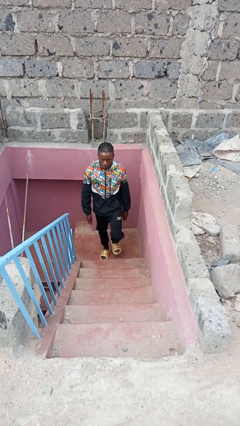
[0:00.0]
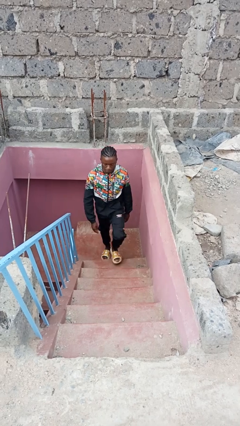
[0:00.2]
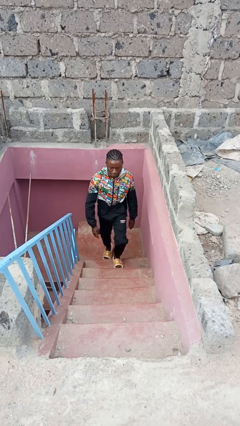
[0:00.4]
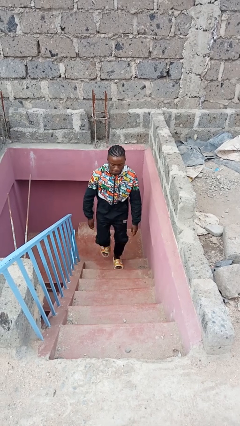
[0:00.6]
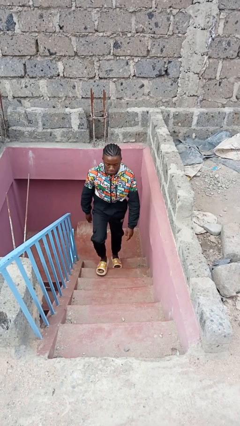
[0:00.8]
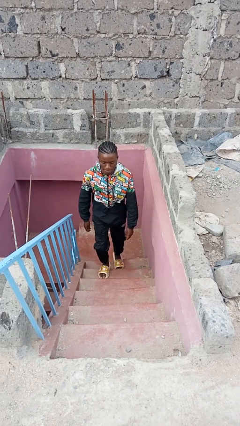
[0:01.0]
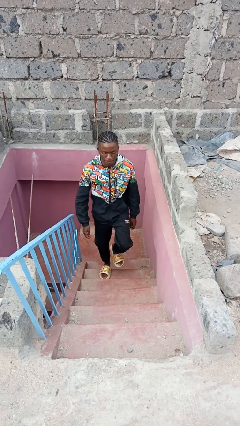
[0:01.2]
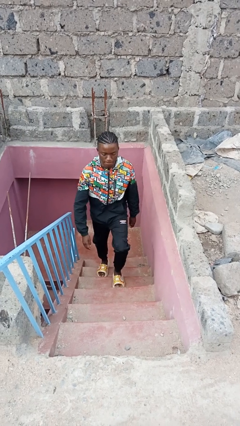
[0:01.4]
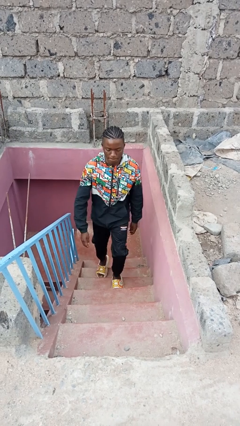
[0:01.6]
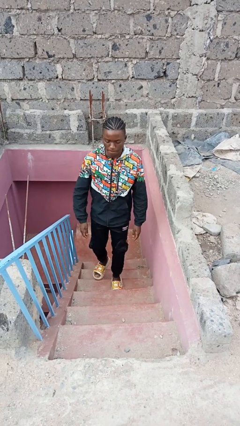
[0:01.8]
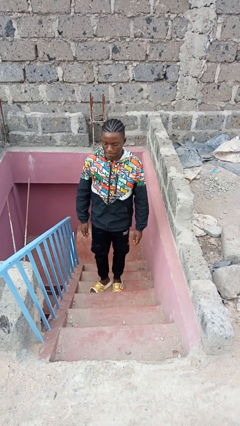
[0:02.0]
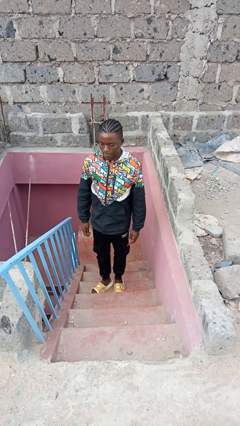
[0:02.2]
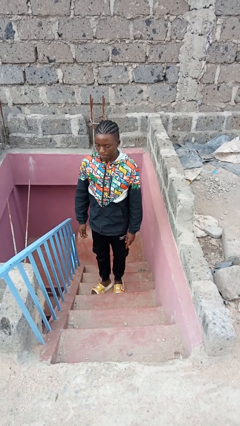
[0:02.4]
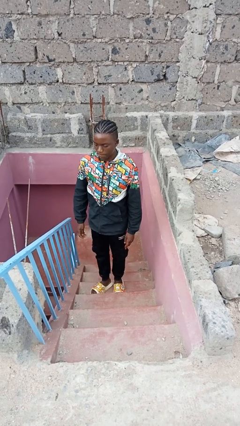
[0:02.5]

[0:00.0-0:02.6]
person climbs up stairs

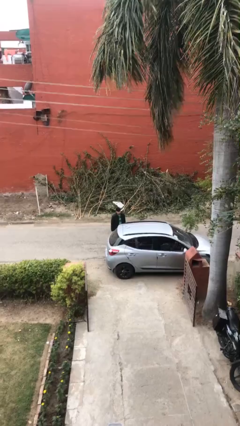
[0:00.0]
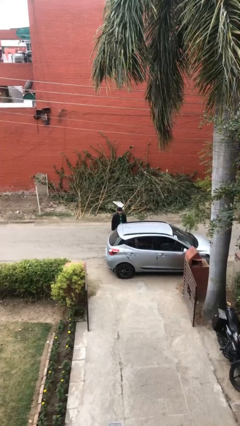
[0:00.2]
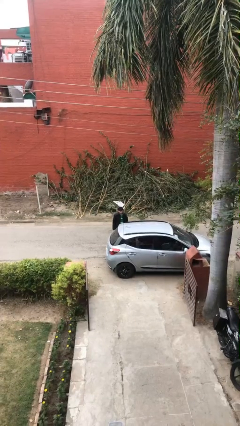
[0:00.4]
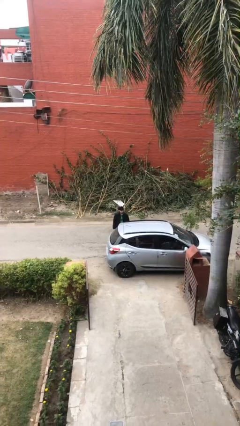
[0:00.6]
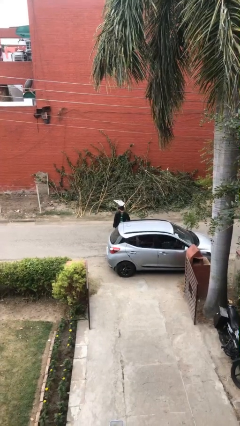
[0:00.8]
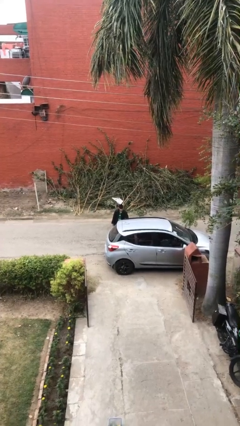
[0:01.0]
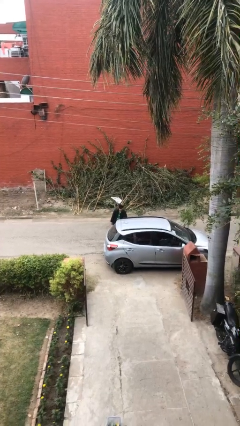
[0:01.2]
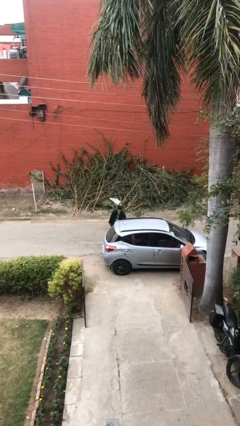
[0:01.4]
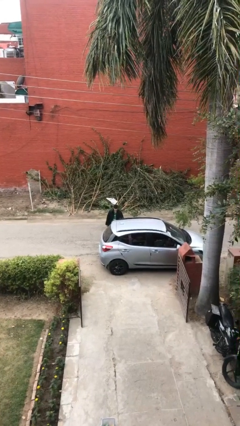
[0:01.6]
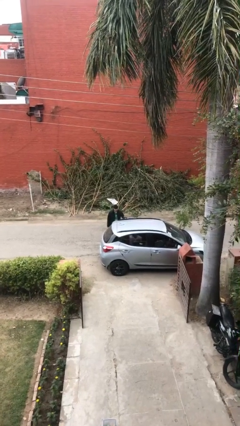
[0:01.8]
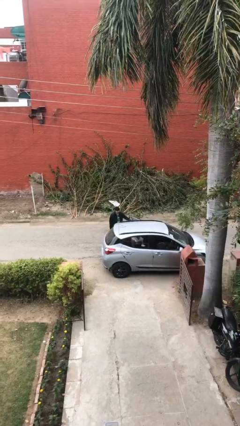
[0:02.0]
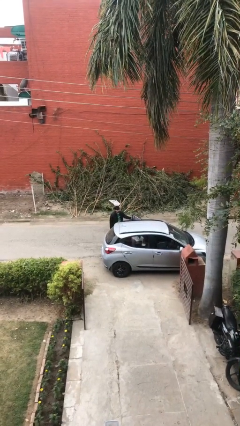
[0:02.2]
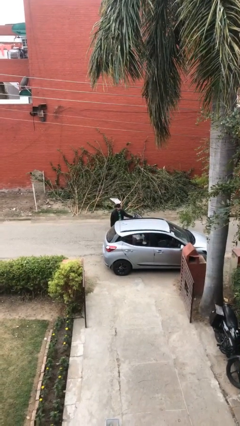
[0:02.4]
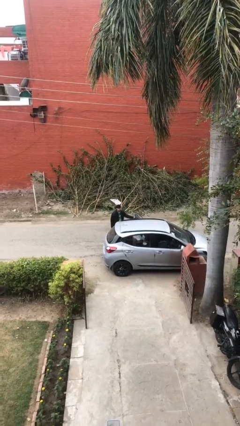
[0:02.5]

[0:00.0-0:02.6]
person opens car door

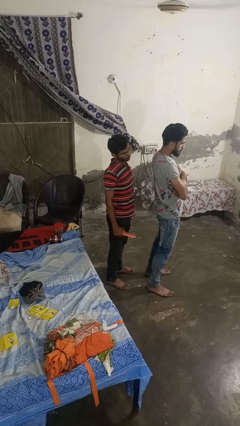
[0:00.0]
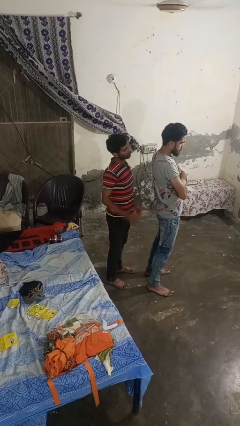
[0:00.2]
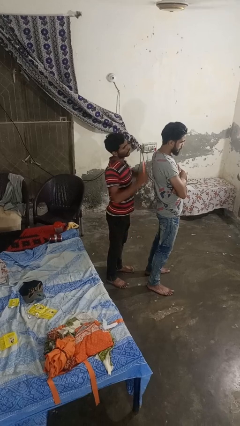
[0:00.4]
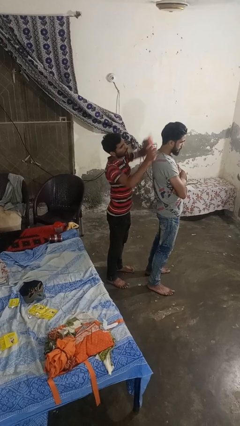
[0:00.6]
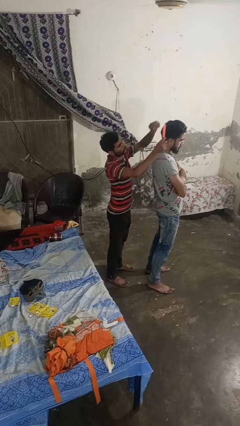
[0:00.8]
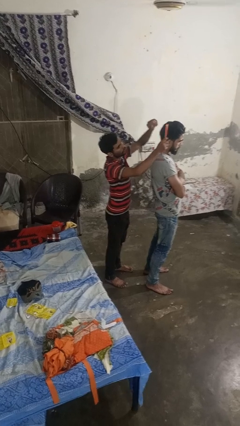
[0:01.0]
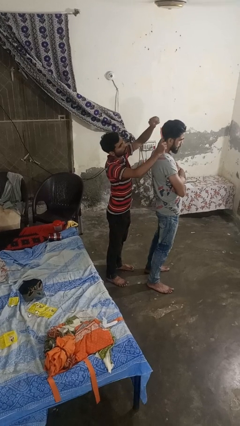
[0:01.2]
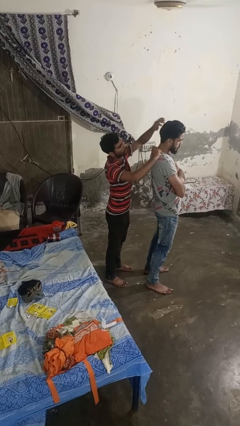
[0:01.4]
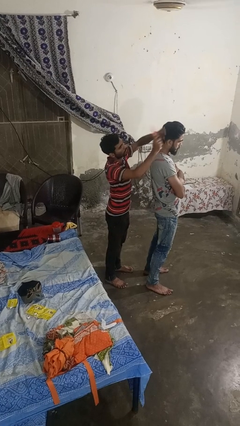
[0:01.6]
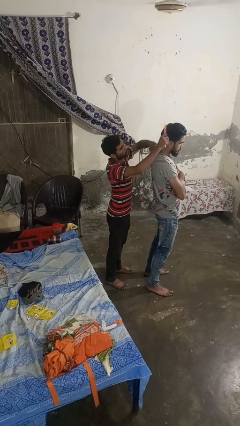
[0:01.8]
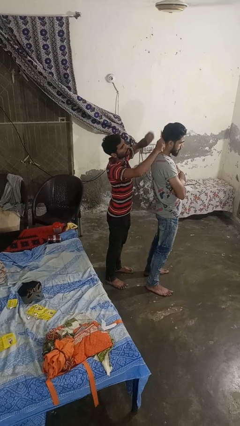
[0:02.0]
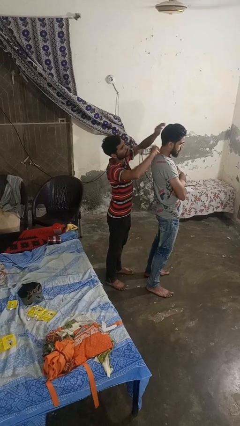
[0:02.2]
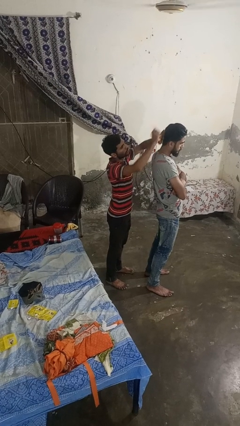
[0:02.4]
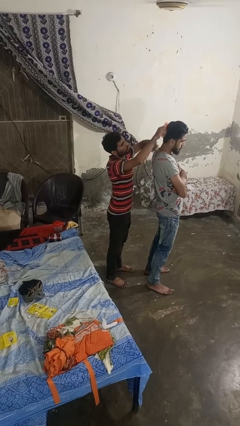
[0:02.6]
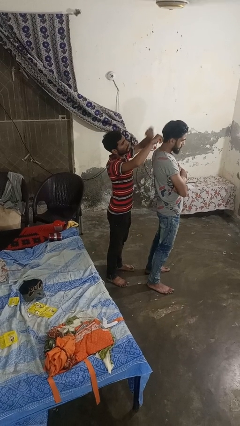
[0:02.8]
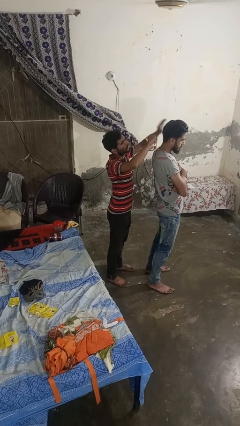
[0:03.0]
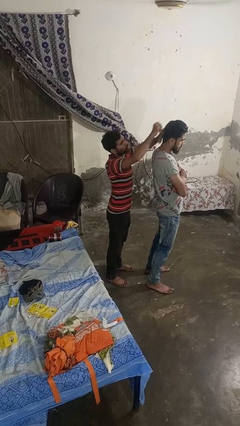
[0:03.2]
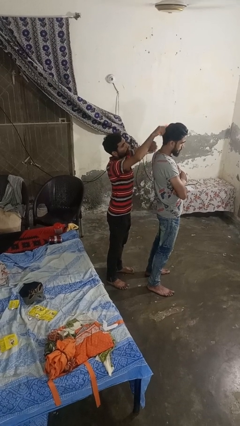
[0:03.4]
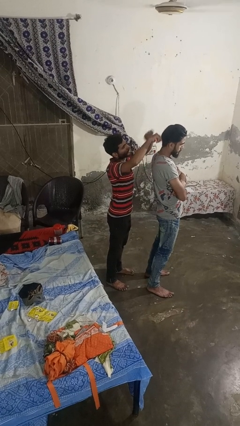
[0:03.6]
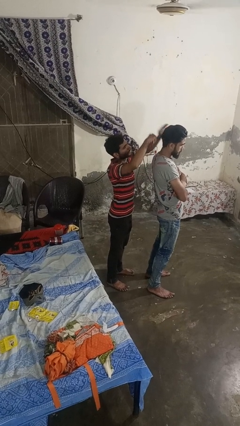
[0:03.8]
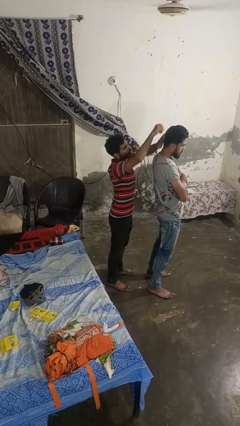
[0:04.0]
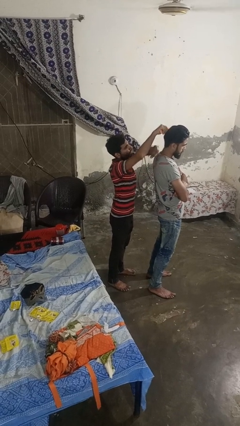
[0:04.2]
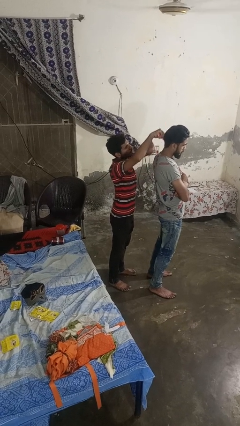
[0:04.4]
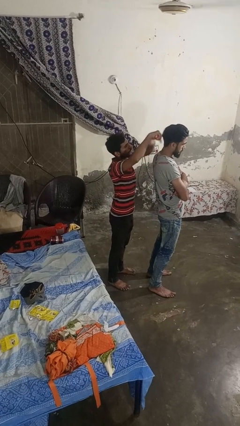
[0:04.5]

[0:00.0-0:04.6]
person brushes hair of person

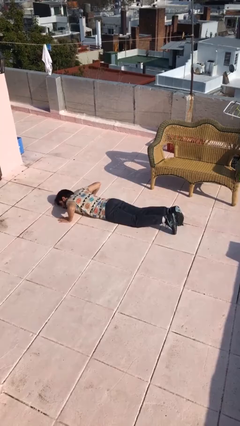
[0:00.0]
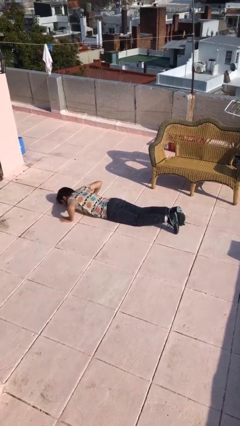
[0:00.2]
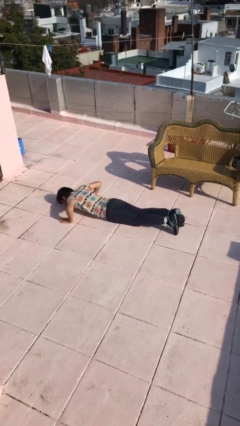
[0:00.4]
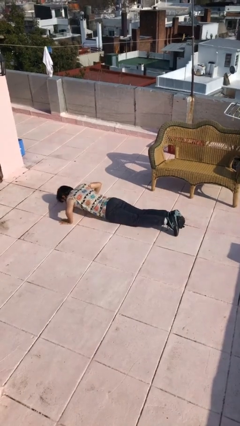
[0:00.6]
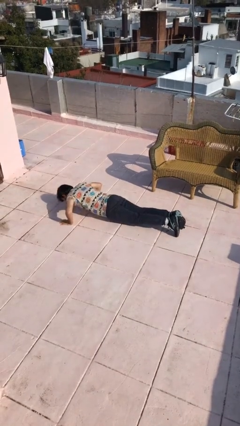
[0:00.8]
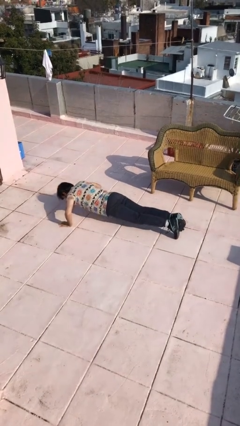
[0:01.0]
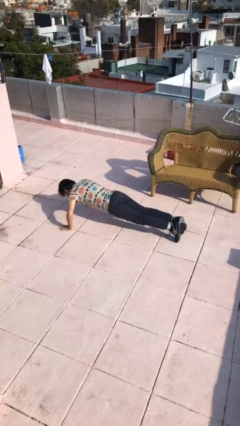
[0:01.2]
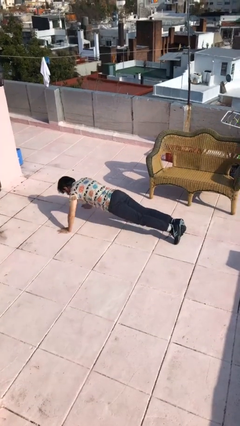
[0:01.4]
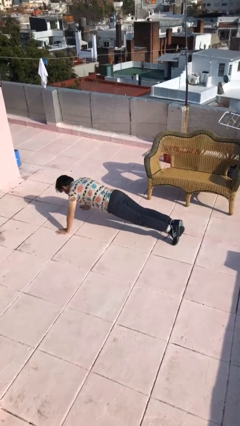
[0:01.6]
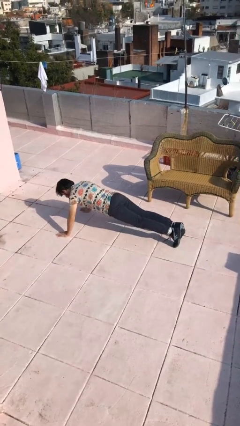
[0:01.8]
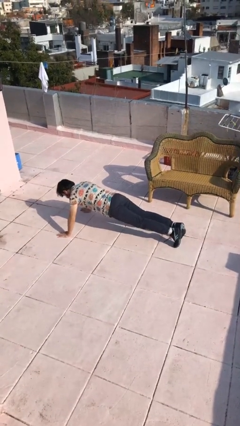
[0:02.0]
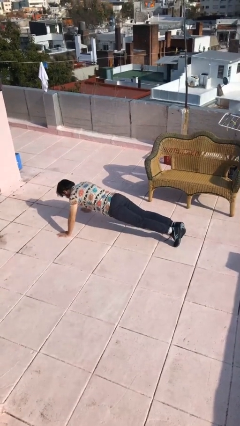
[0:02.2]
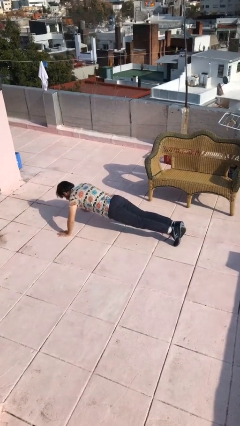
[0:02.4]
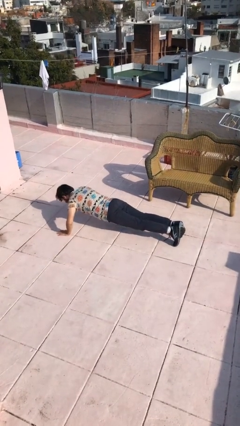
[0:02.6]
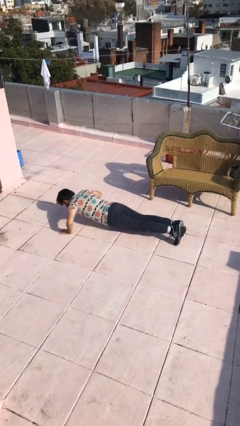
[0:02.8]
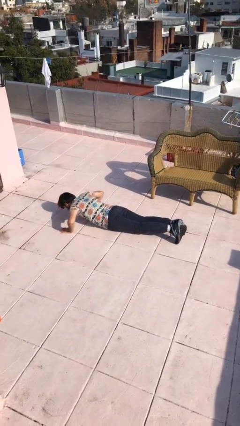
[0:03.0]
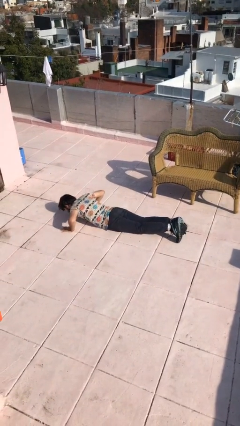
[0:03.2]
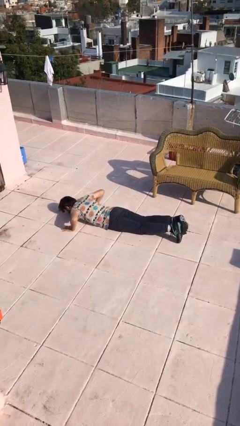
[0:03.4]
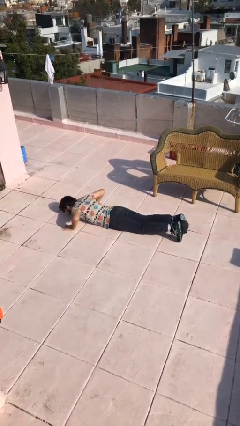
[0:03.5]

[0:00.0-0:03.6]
person exercises with pushup

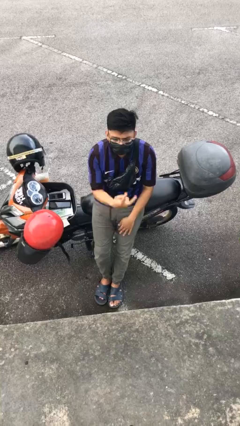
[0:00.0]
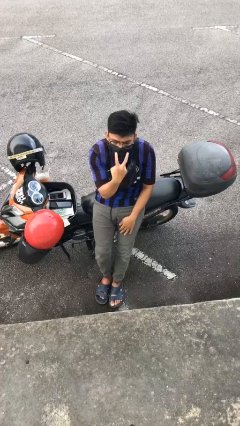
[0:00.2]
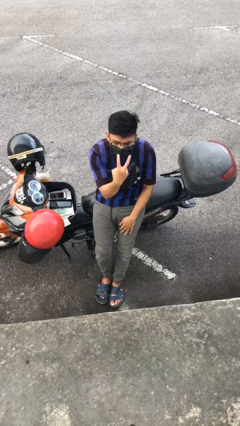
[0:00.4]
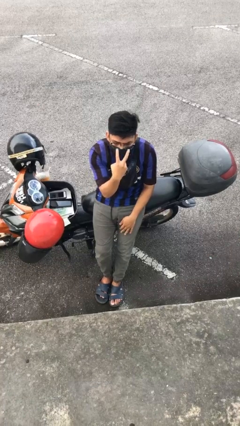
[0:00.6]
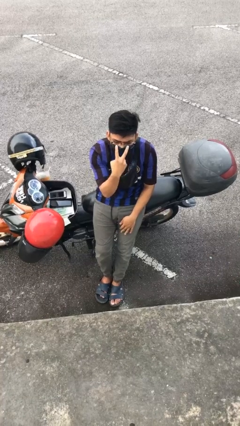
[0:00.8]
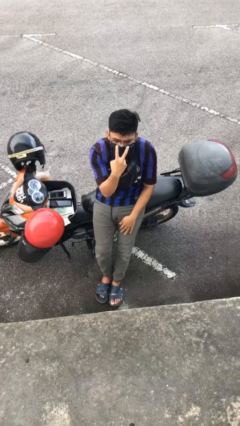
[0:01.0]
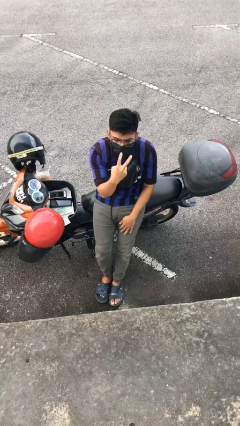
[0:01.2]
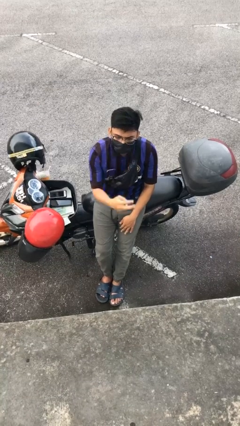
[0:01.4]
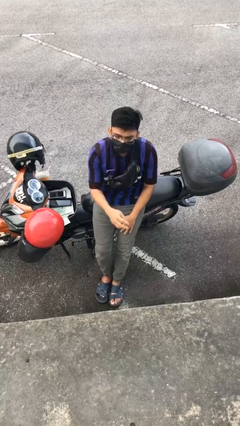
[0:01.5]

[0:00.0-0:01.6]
person gestures watch closely

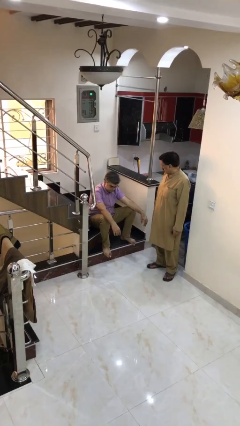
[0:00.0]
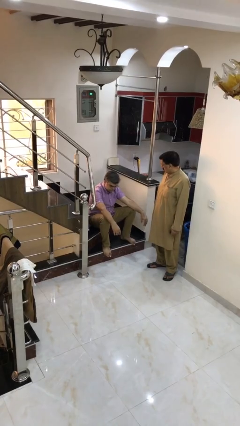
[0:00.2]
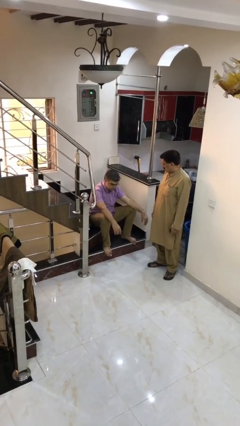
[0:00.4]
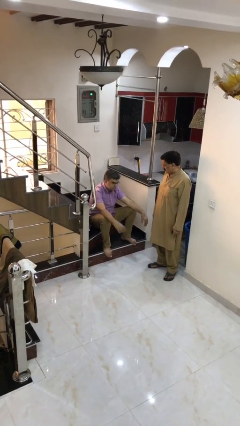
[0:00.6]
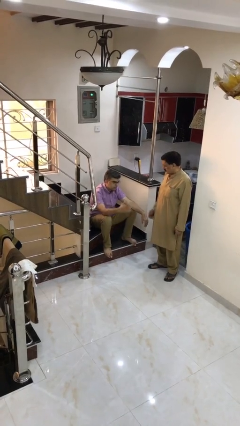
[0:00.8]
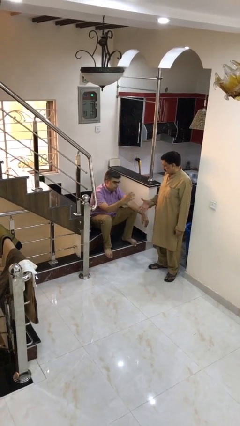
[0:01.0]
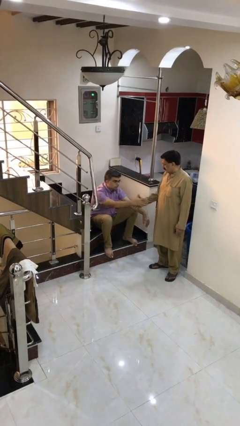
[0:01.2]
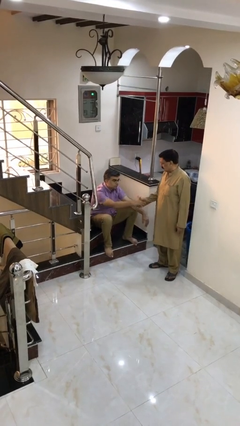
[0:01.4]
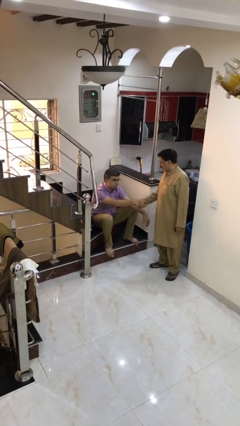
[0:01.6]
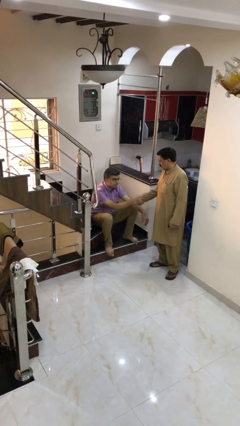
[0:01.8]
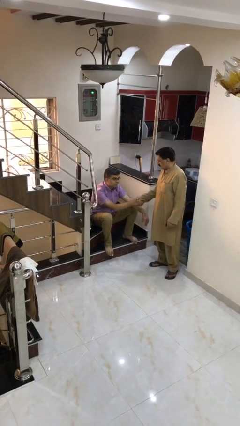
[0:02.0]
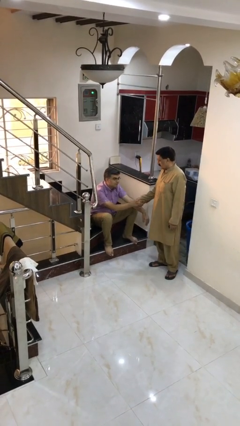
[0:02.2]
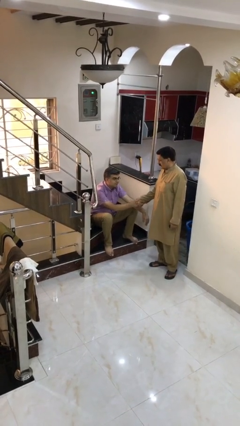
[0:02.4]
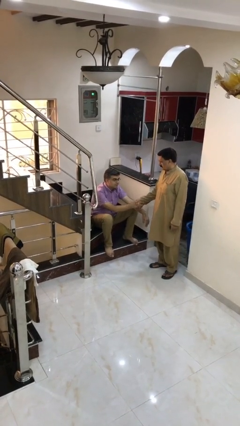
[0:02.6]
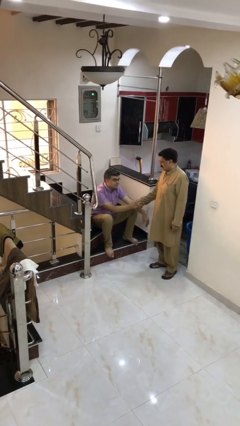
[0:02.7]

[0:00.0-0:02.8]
person shakes hand
